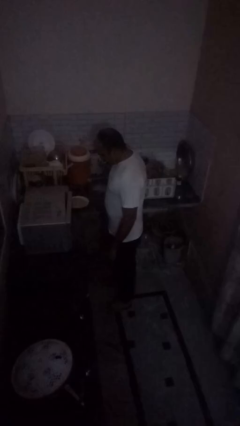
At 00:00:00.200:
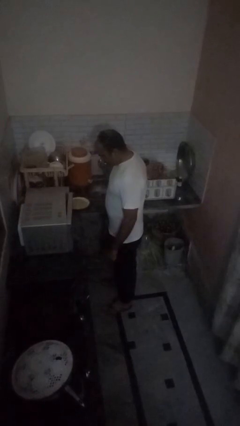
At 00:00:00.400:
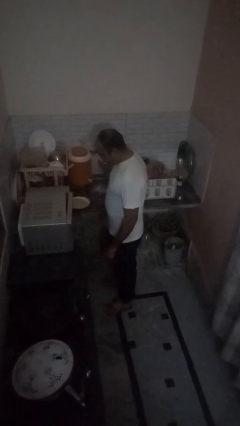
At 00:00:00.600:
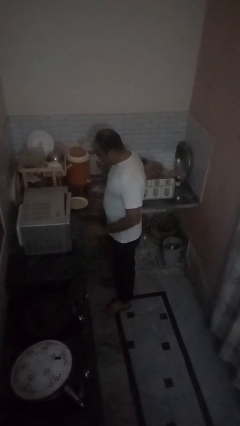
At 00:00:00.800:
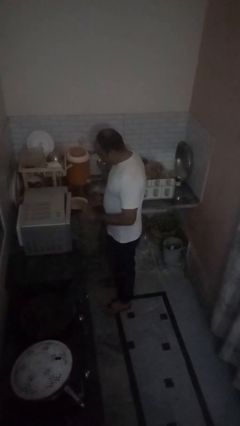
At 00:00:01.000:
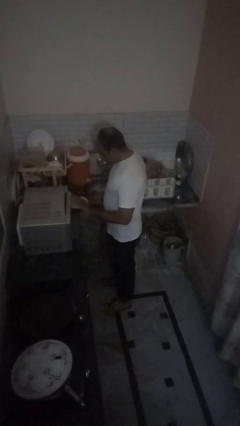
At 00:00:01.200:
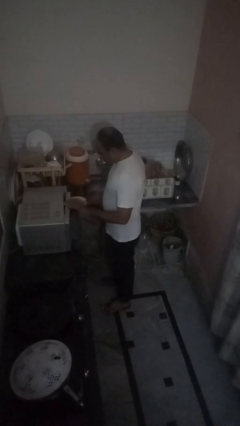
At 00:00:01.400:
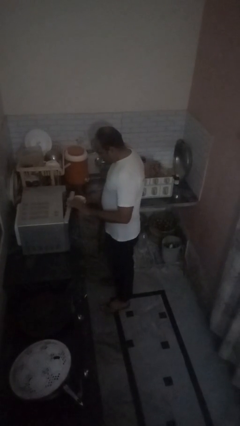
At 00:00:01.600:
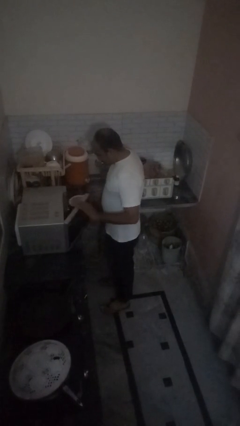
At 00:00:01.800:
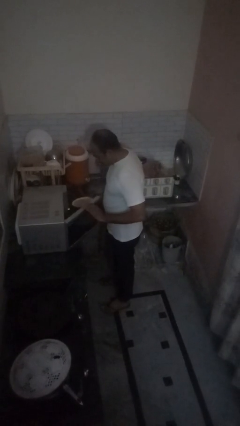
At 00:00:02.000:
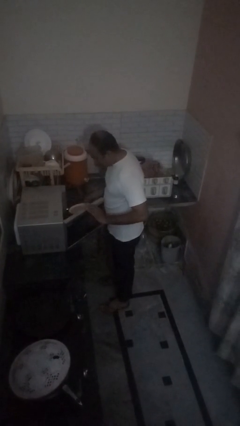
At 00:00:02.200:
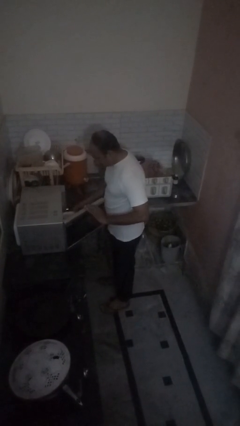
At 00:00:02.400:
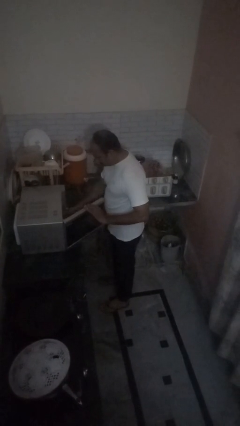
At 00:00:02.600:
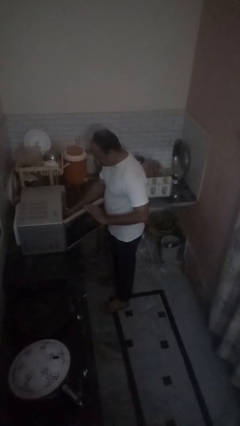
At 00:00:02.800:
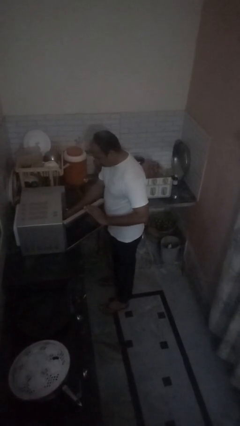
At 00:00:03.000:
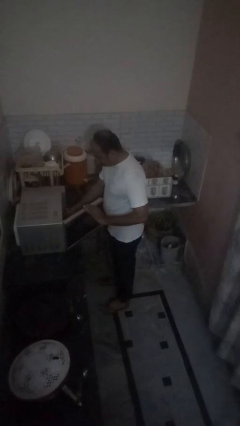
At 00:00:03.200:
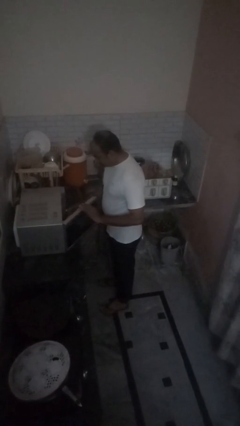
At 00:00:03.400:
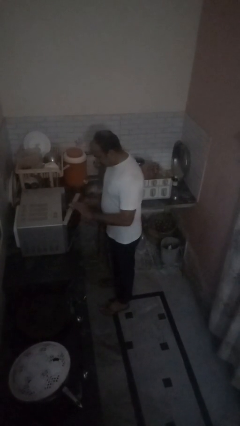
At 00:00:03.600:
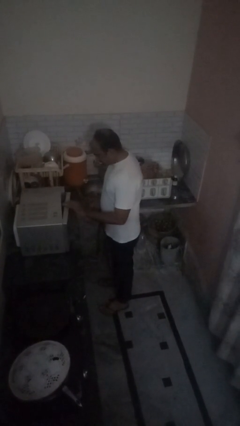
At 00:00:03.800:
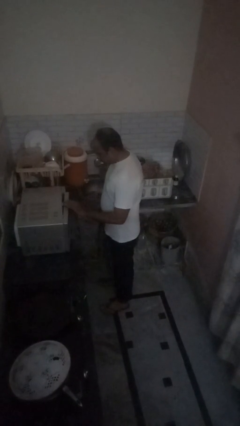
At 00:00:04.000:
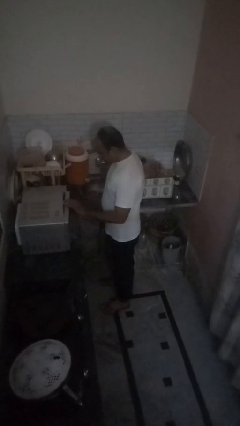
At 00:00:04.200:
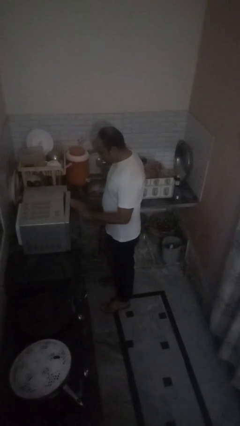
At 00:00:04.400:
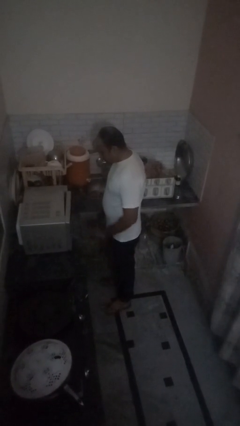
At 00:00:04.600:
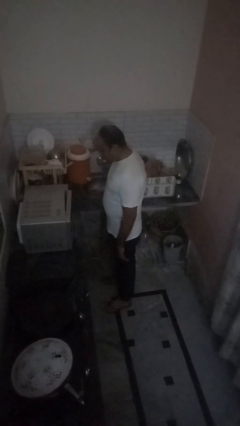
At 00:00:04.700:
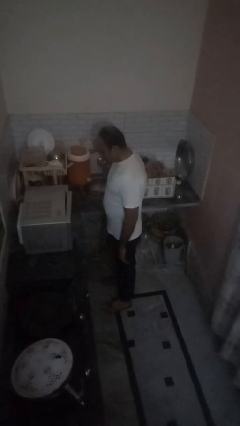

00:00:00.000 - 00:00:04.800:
person puts object into oven

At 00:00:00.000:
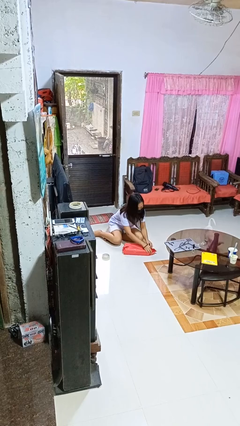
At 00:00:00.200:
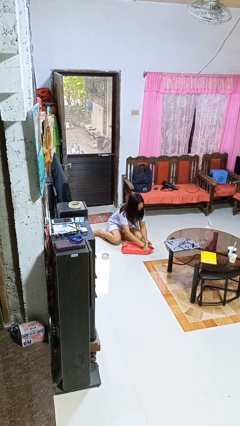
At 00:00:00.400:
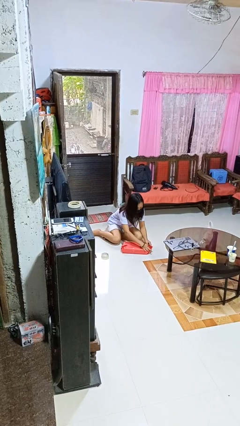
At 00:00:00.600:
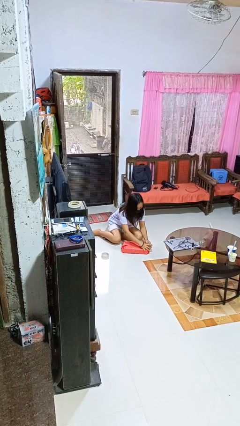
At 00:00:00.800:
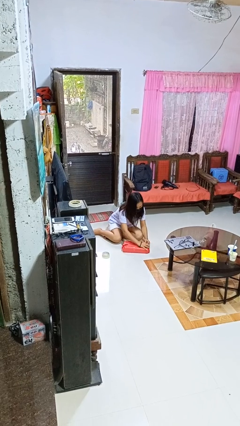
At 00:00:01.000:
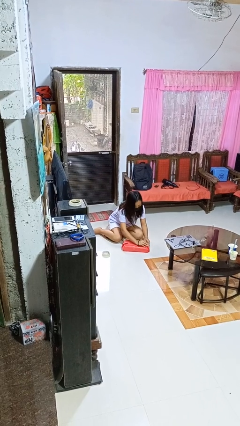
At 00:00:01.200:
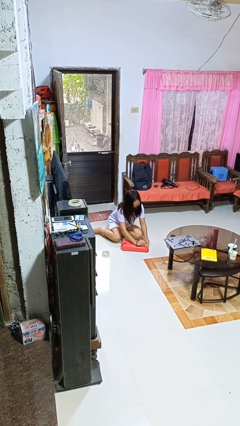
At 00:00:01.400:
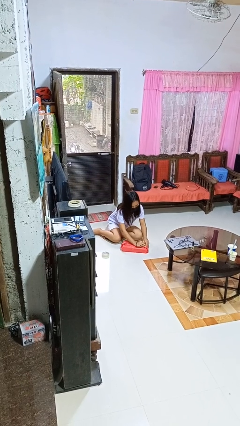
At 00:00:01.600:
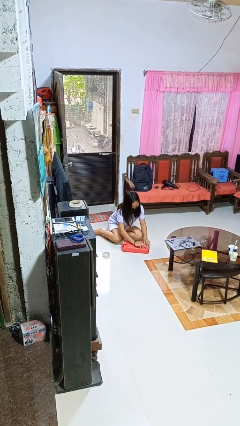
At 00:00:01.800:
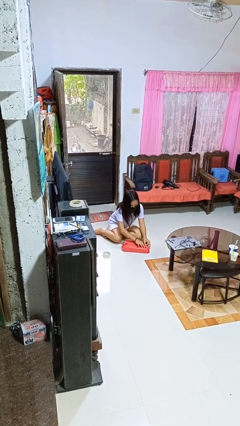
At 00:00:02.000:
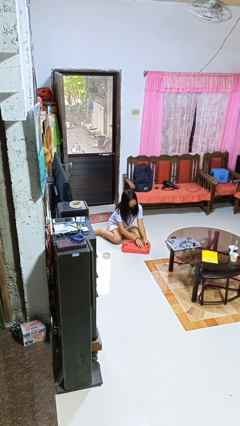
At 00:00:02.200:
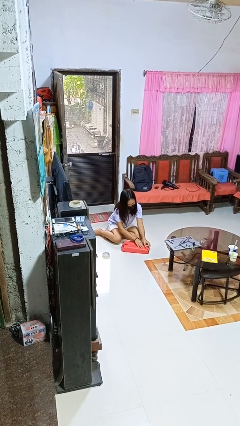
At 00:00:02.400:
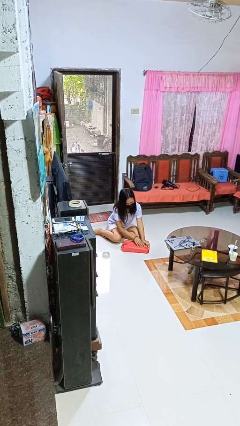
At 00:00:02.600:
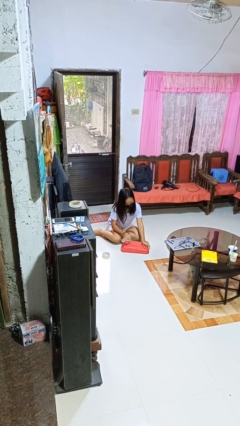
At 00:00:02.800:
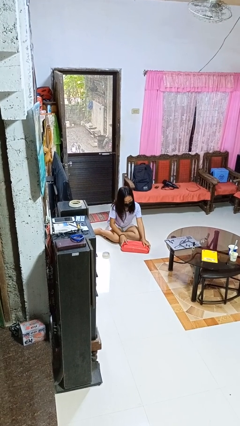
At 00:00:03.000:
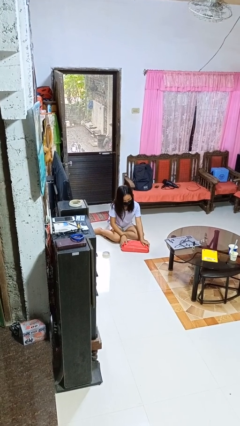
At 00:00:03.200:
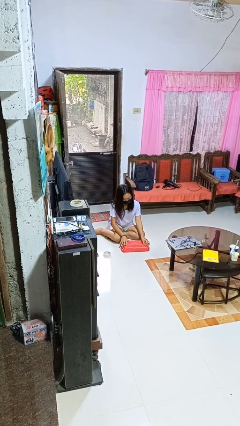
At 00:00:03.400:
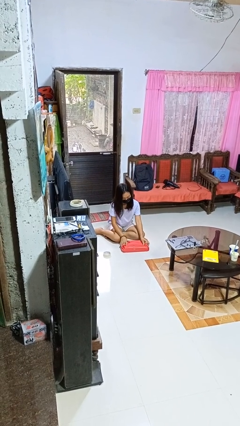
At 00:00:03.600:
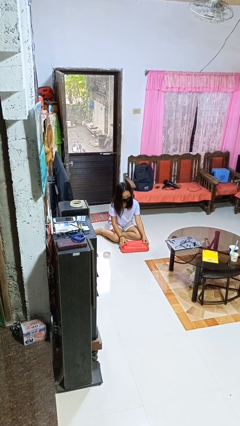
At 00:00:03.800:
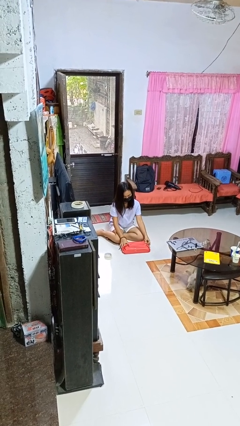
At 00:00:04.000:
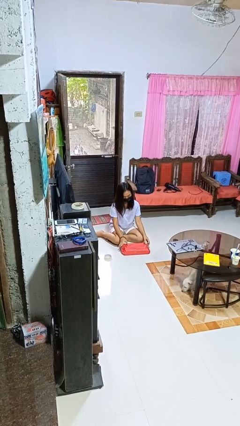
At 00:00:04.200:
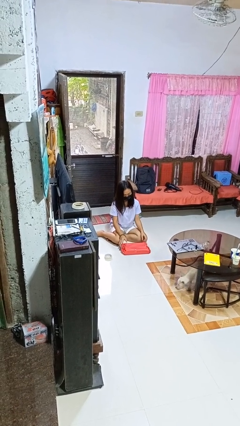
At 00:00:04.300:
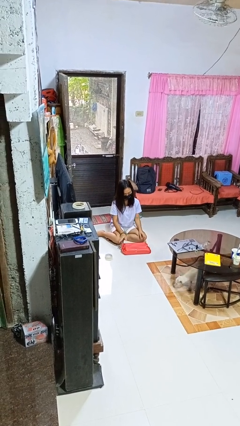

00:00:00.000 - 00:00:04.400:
person wraps box

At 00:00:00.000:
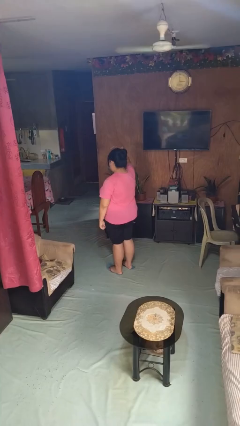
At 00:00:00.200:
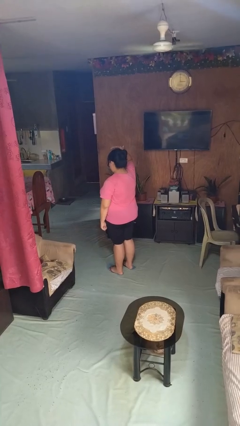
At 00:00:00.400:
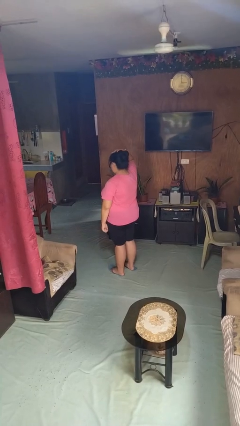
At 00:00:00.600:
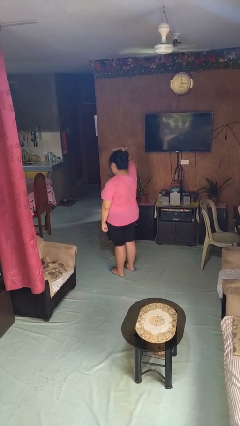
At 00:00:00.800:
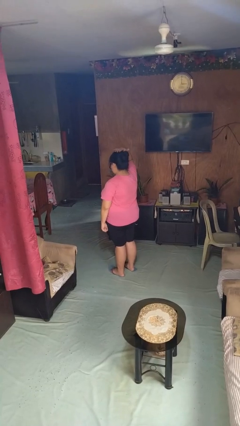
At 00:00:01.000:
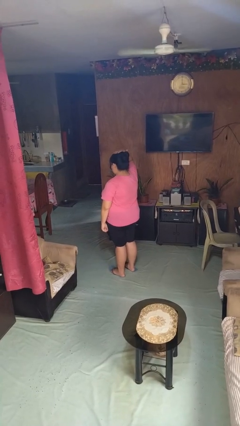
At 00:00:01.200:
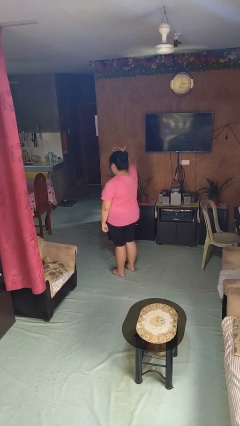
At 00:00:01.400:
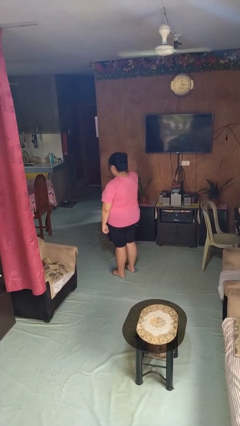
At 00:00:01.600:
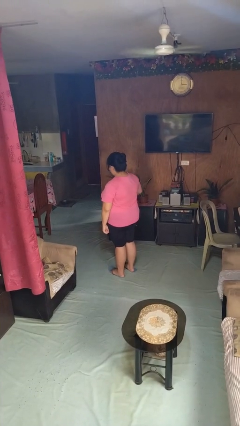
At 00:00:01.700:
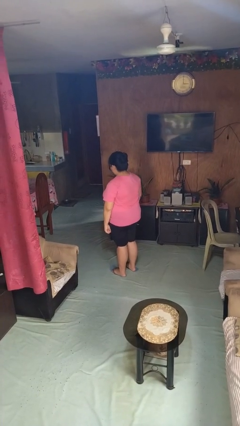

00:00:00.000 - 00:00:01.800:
person pats head

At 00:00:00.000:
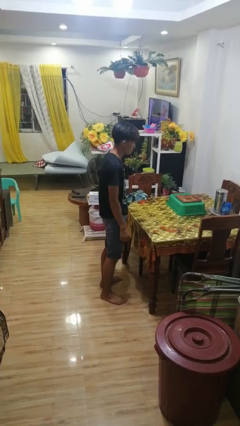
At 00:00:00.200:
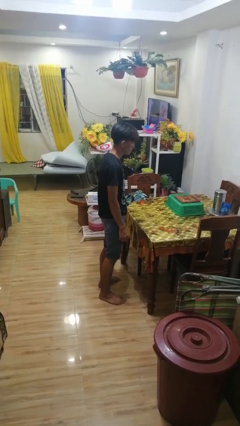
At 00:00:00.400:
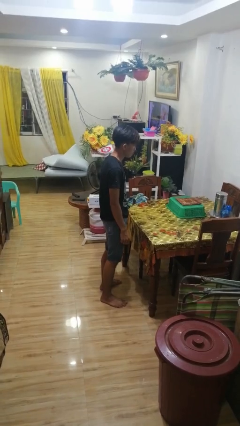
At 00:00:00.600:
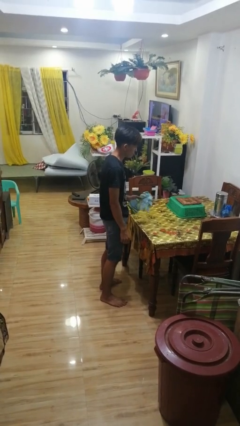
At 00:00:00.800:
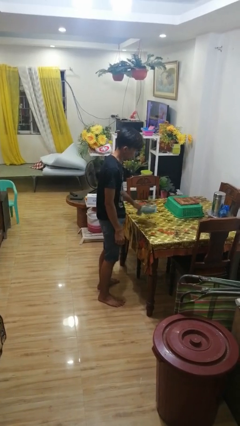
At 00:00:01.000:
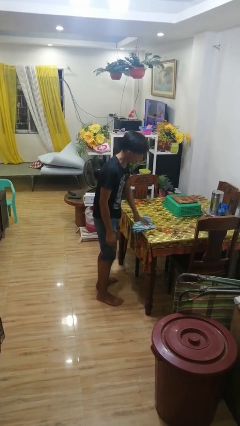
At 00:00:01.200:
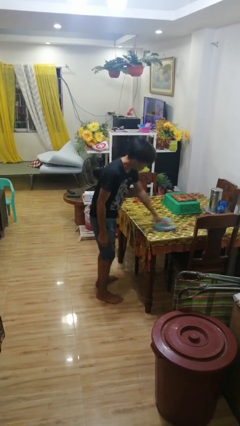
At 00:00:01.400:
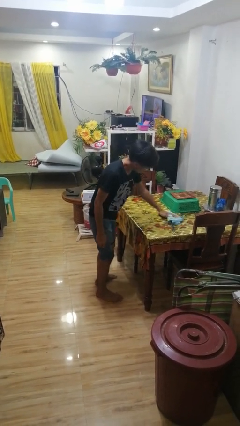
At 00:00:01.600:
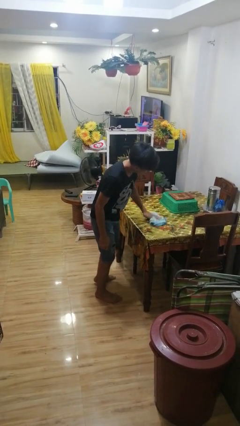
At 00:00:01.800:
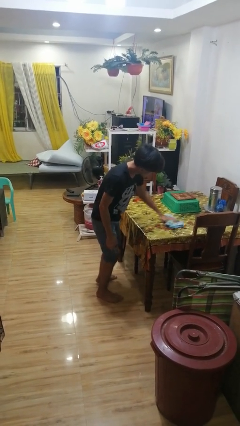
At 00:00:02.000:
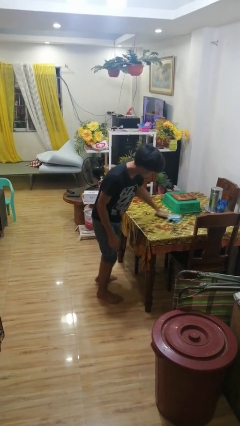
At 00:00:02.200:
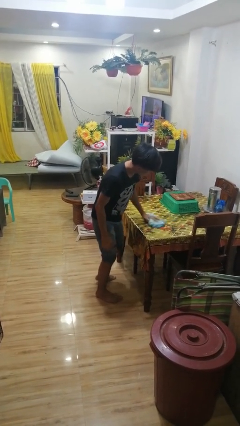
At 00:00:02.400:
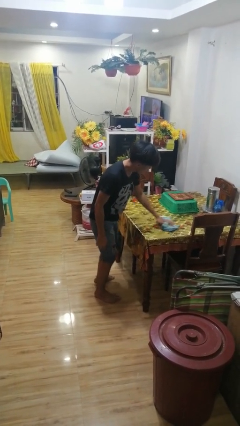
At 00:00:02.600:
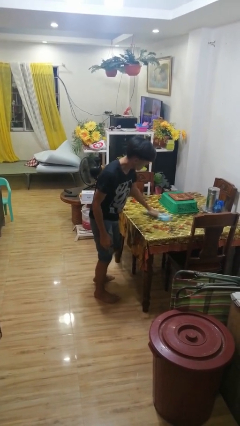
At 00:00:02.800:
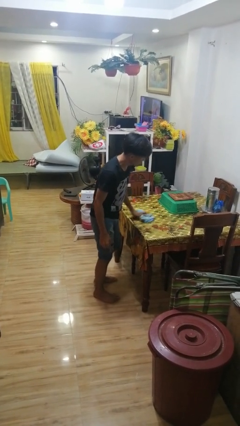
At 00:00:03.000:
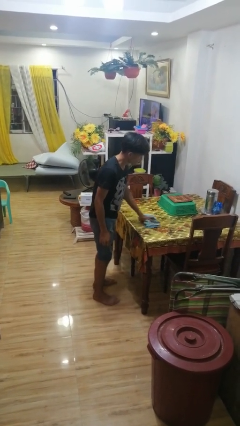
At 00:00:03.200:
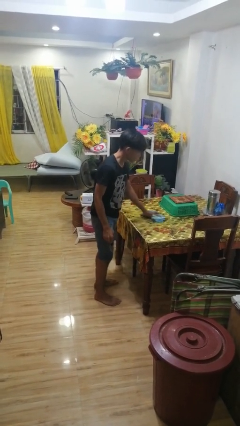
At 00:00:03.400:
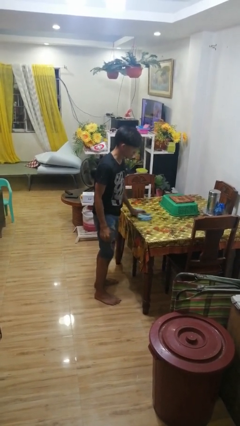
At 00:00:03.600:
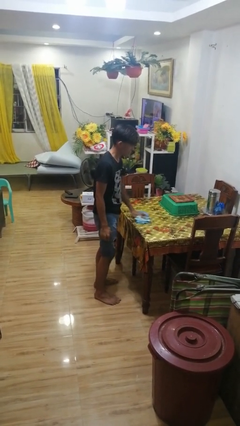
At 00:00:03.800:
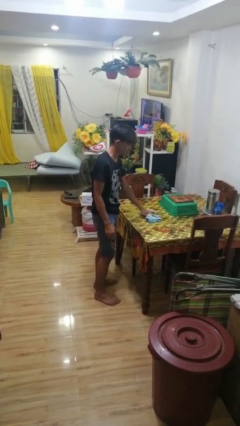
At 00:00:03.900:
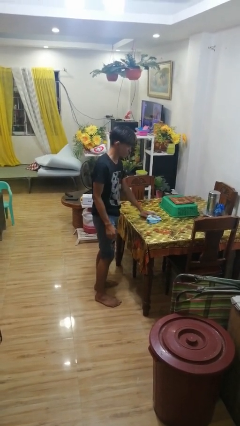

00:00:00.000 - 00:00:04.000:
person cleans table with rag

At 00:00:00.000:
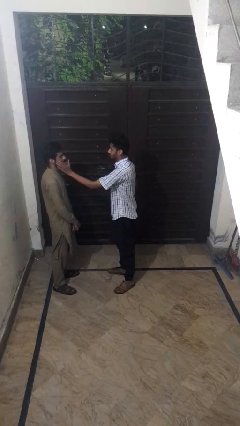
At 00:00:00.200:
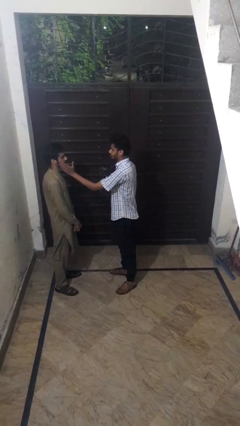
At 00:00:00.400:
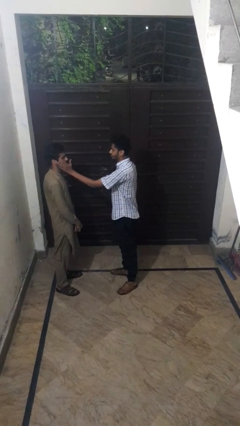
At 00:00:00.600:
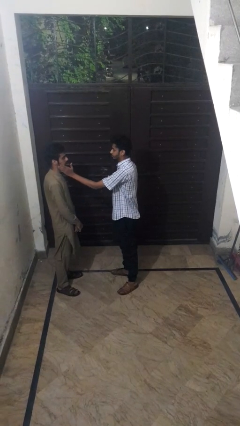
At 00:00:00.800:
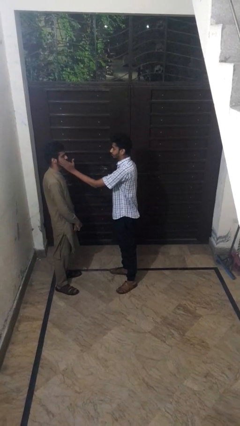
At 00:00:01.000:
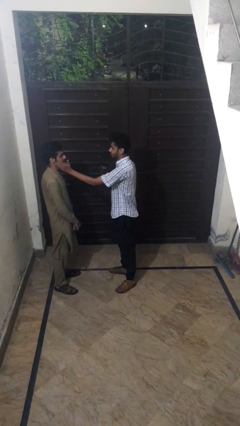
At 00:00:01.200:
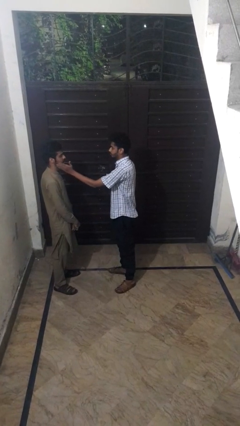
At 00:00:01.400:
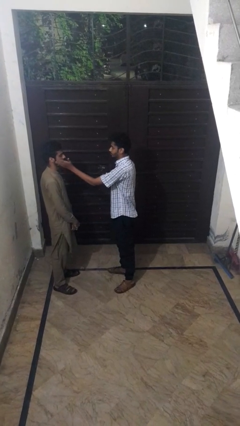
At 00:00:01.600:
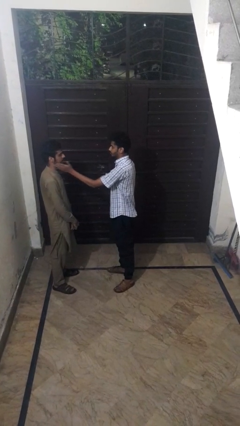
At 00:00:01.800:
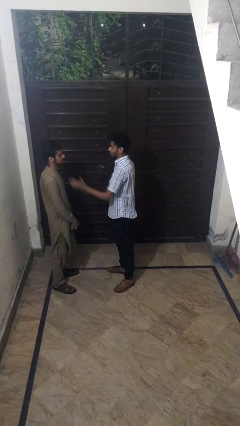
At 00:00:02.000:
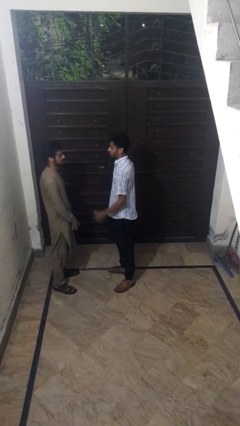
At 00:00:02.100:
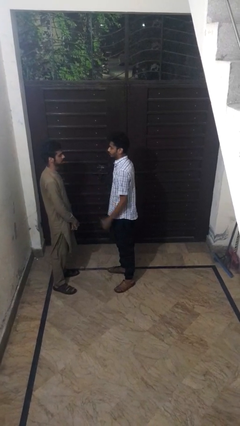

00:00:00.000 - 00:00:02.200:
person touches face of person

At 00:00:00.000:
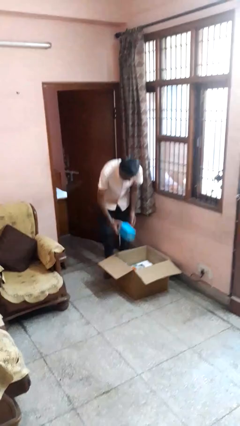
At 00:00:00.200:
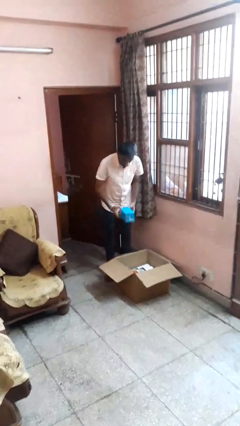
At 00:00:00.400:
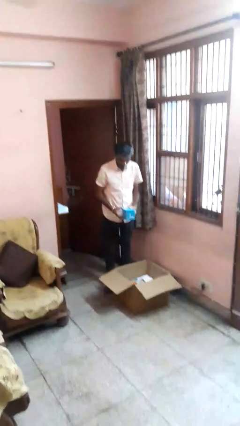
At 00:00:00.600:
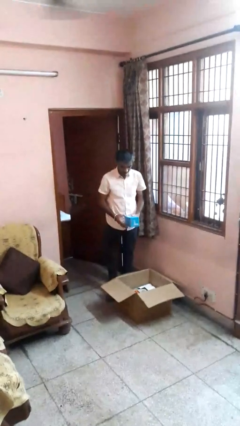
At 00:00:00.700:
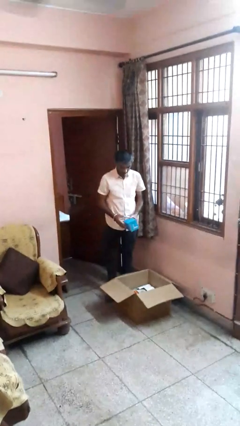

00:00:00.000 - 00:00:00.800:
person takes object from box
